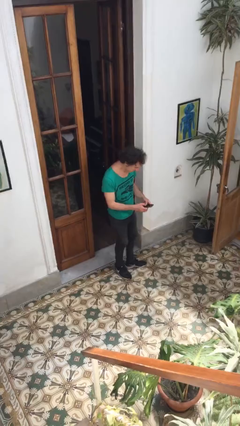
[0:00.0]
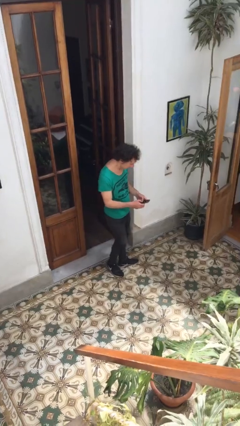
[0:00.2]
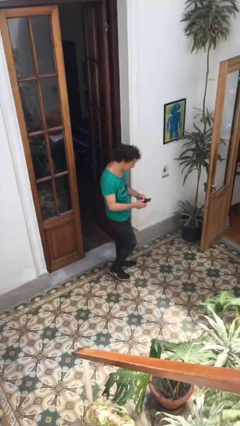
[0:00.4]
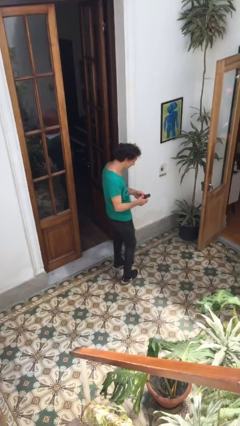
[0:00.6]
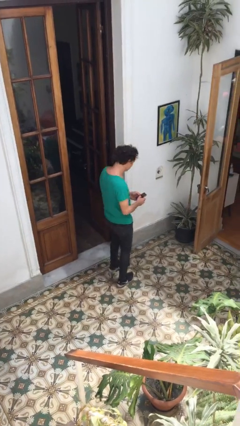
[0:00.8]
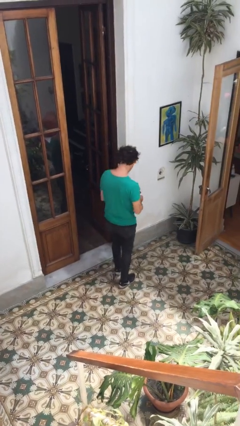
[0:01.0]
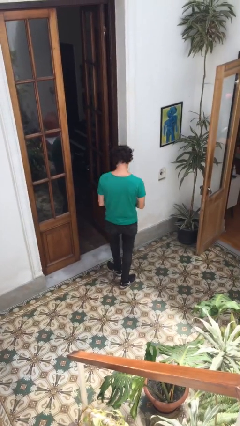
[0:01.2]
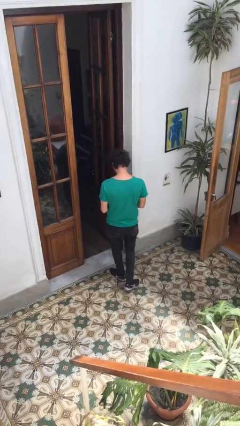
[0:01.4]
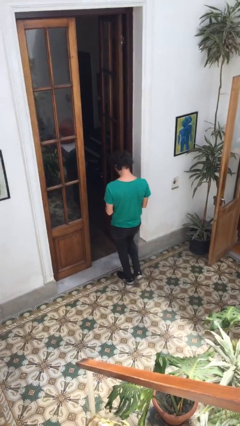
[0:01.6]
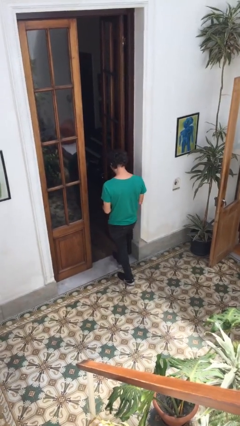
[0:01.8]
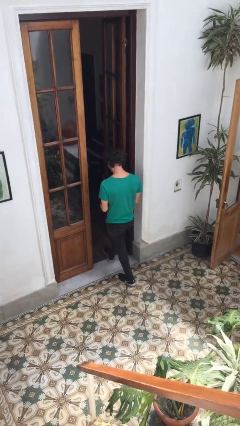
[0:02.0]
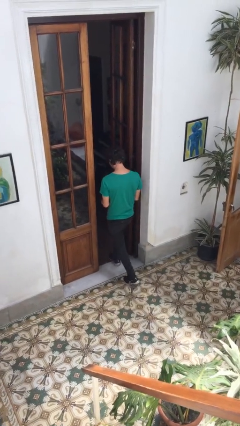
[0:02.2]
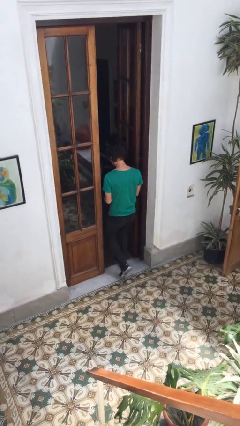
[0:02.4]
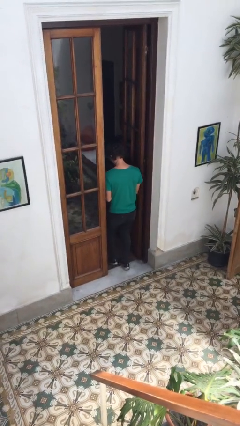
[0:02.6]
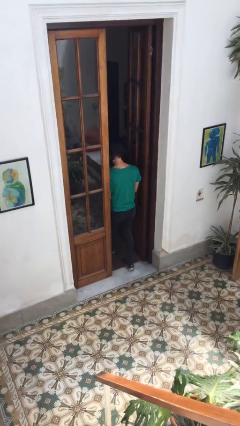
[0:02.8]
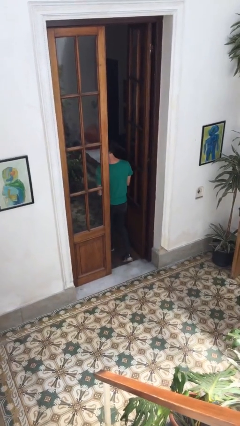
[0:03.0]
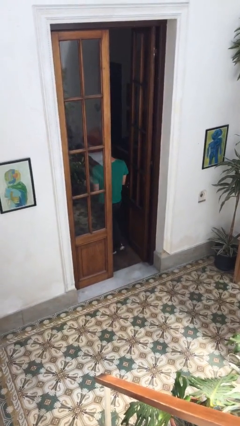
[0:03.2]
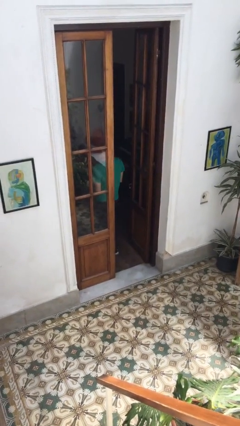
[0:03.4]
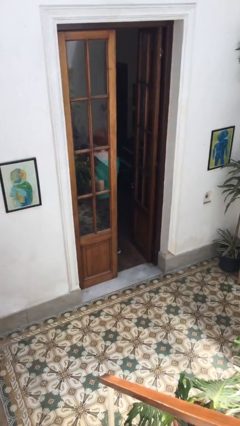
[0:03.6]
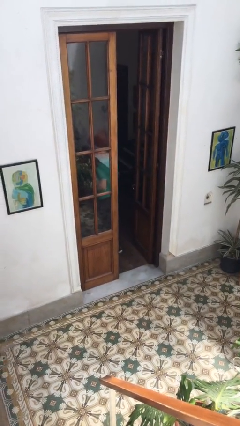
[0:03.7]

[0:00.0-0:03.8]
person exits scene through structure

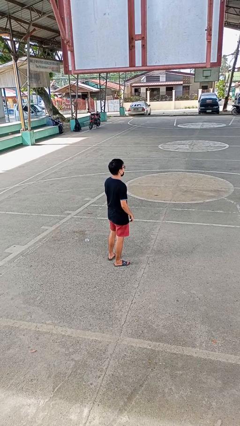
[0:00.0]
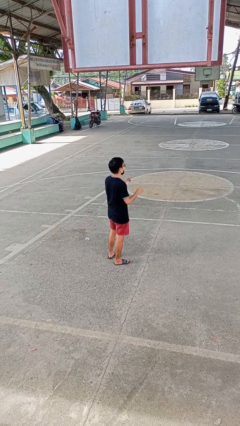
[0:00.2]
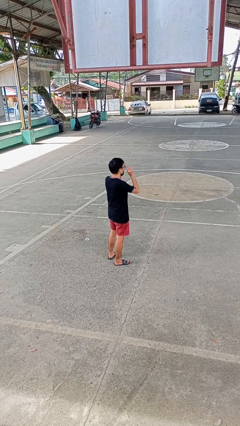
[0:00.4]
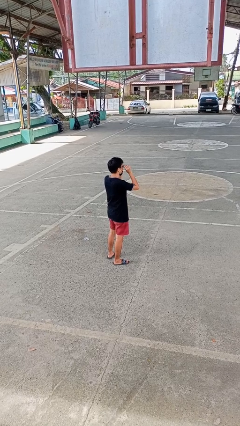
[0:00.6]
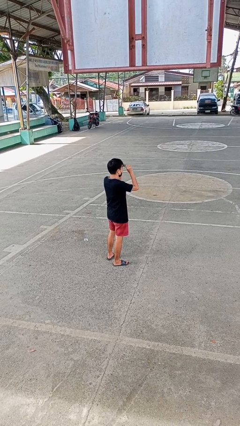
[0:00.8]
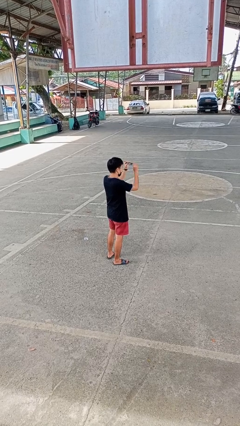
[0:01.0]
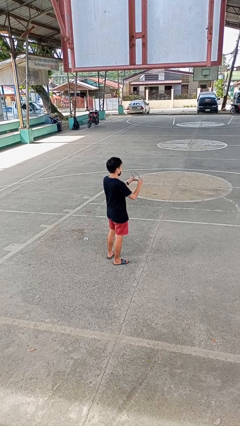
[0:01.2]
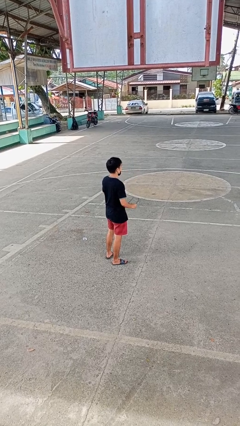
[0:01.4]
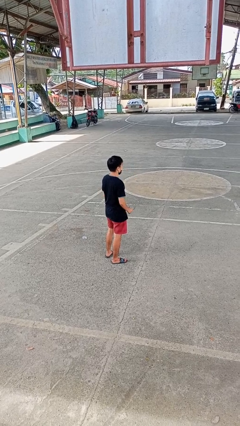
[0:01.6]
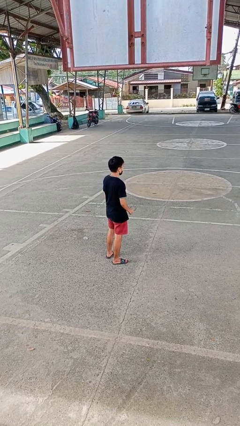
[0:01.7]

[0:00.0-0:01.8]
person takes off glasses

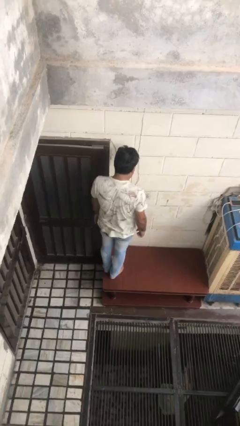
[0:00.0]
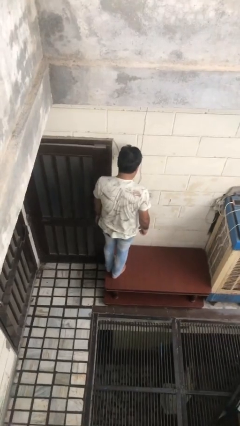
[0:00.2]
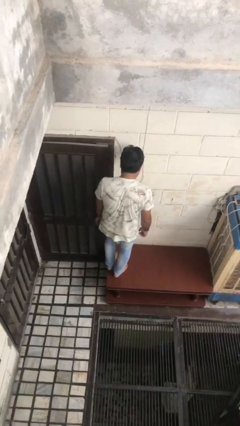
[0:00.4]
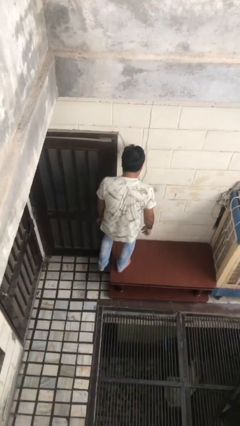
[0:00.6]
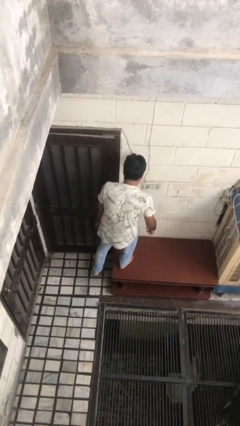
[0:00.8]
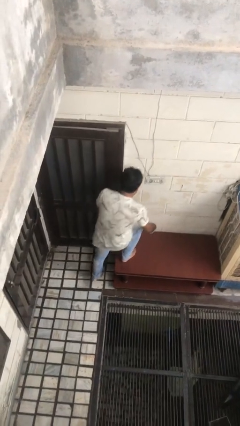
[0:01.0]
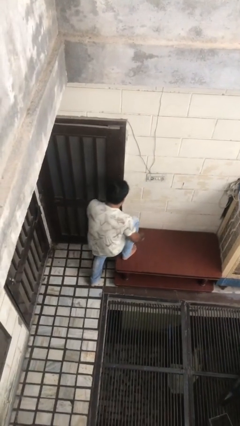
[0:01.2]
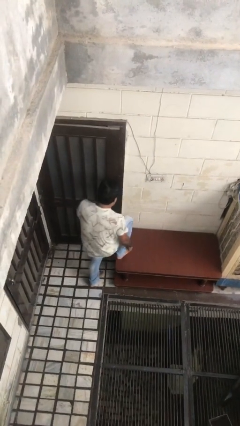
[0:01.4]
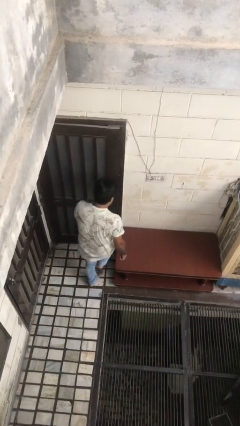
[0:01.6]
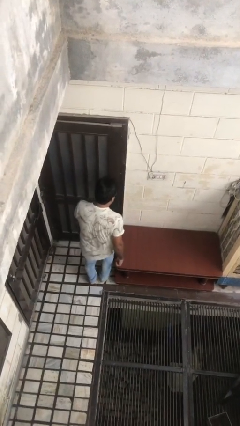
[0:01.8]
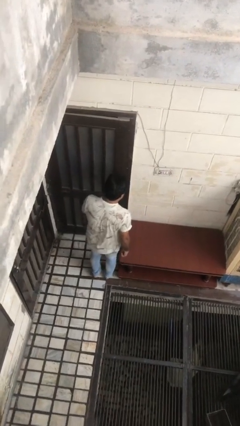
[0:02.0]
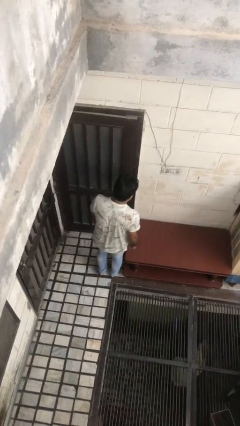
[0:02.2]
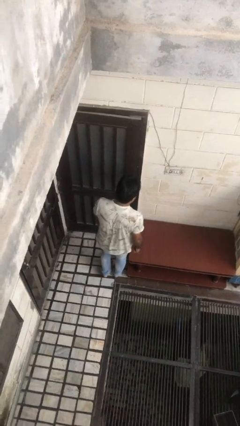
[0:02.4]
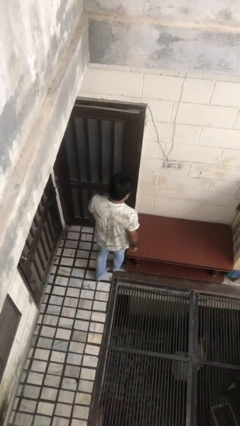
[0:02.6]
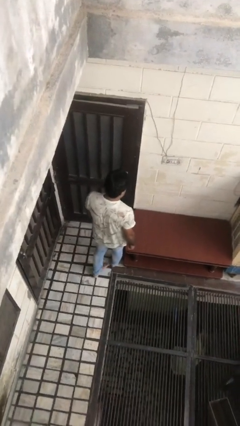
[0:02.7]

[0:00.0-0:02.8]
person climbs off table

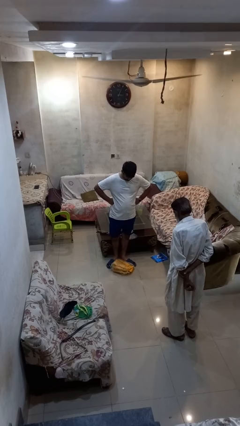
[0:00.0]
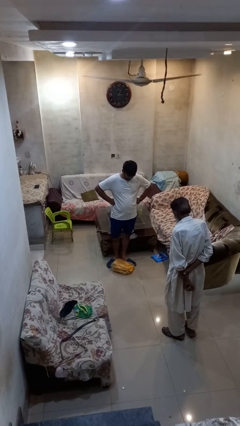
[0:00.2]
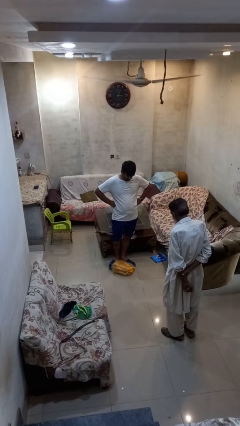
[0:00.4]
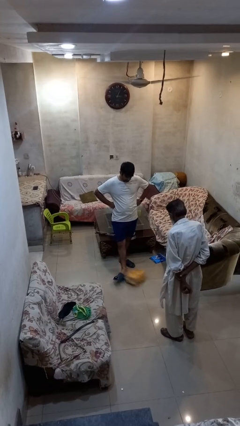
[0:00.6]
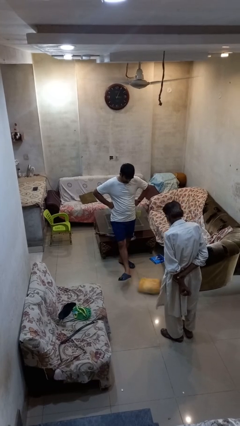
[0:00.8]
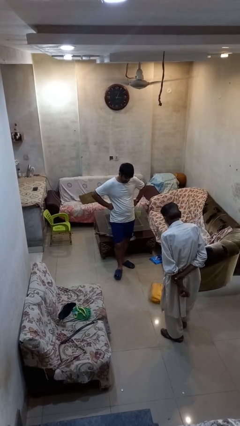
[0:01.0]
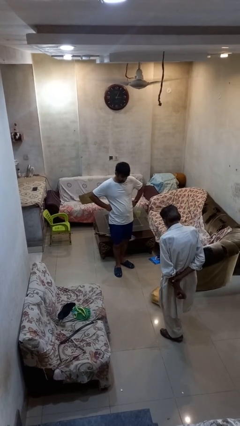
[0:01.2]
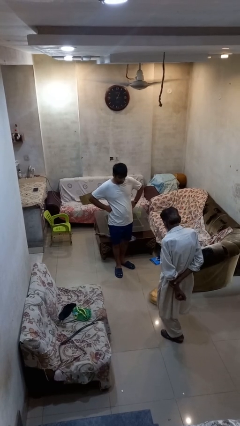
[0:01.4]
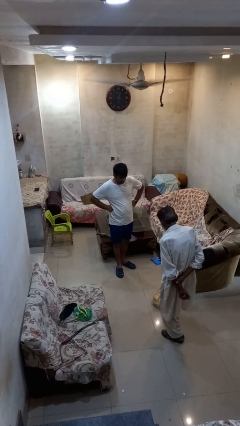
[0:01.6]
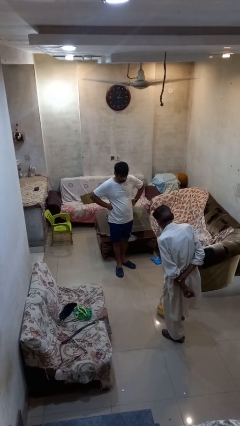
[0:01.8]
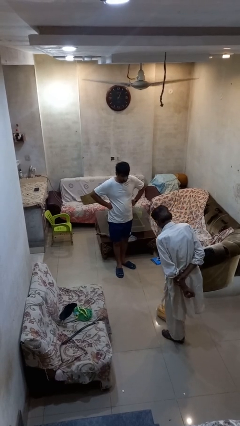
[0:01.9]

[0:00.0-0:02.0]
person kicks object to person

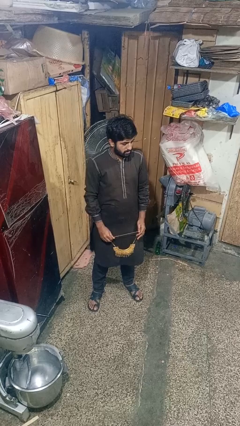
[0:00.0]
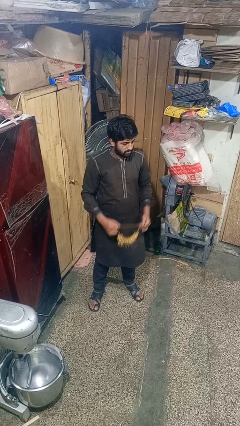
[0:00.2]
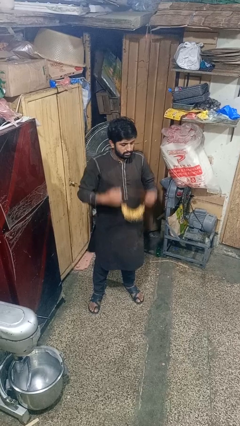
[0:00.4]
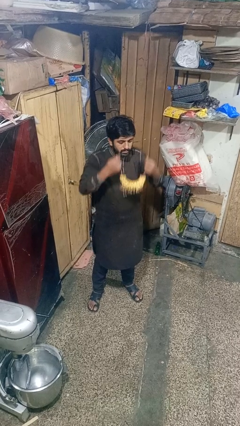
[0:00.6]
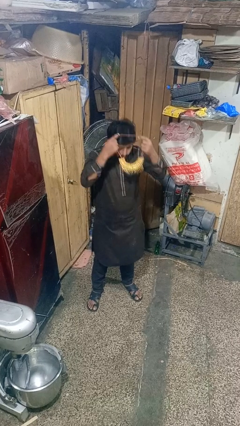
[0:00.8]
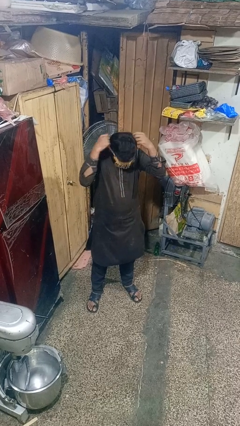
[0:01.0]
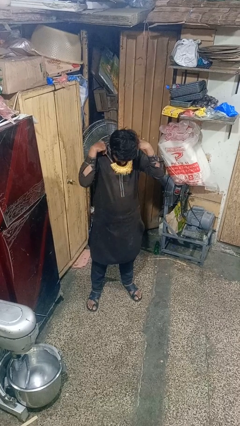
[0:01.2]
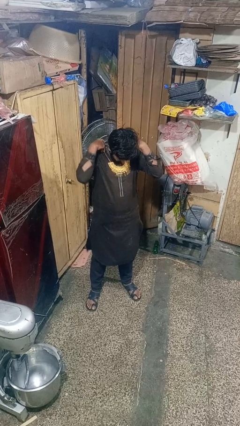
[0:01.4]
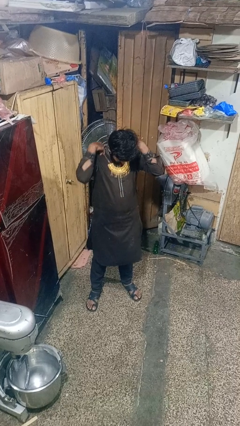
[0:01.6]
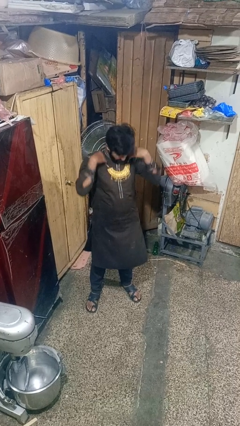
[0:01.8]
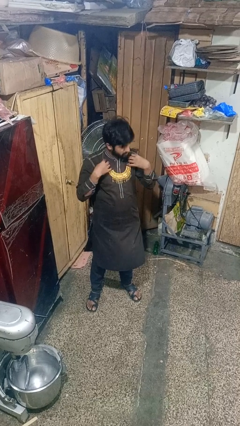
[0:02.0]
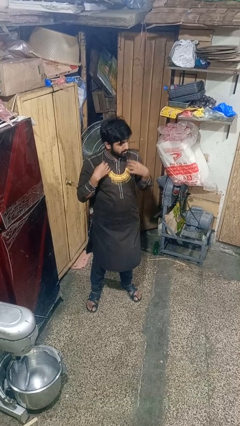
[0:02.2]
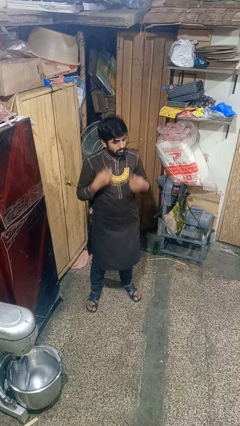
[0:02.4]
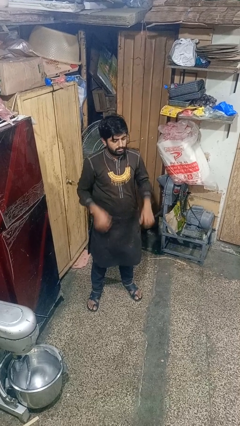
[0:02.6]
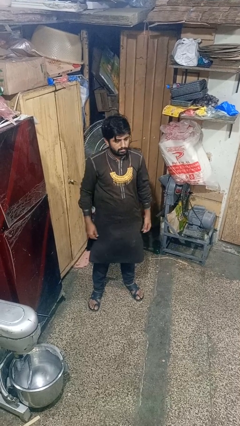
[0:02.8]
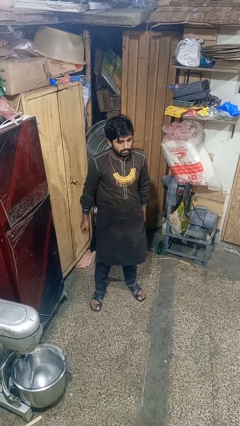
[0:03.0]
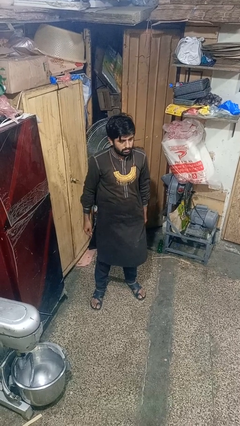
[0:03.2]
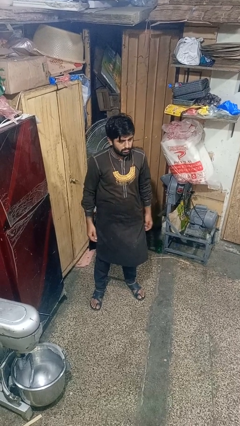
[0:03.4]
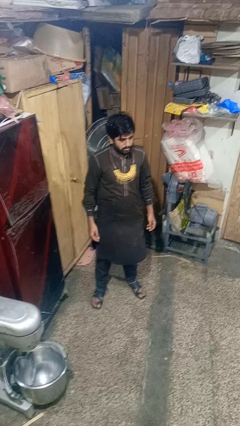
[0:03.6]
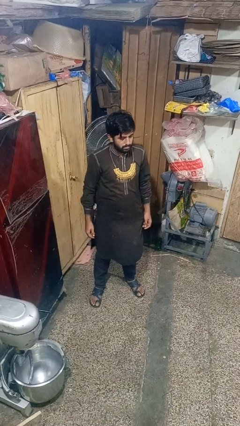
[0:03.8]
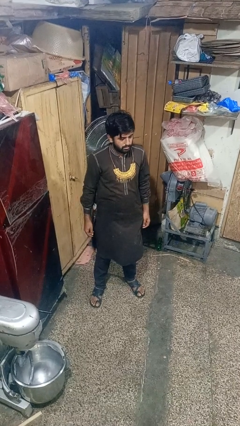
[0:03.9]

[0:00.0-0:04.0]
person puts on necklace

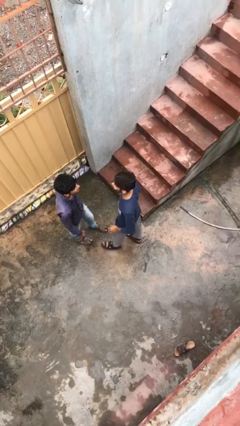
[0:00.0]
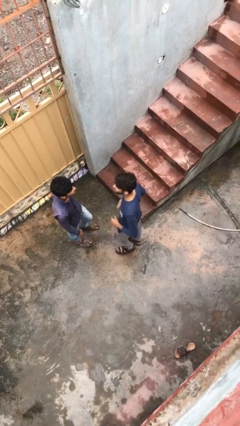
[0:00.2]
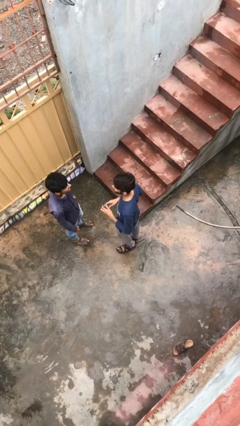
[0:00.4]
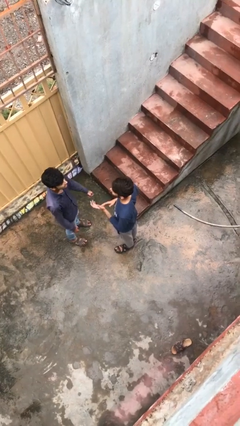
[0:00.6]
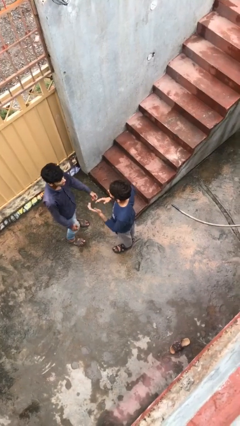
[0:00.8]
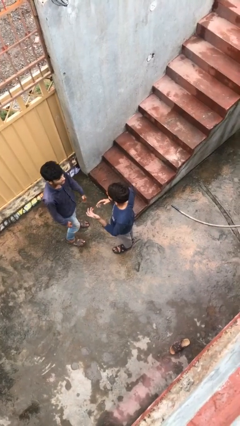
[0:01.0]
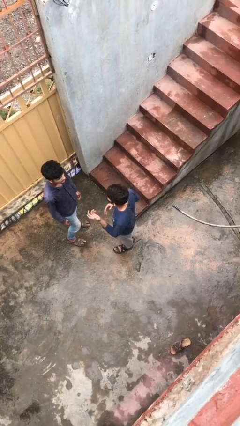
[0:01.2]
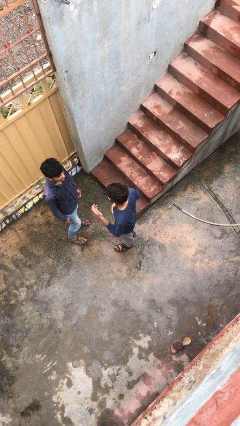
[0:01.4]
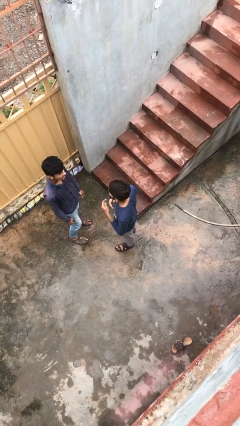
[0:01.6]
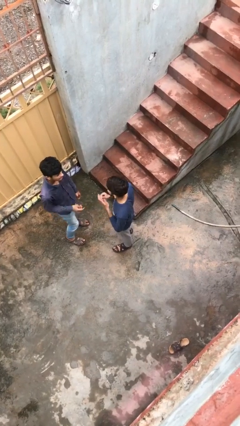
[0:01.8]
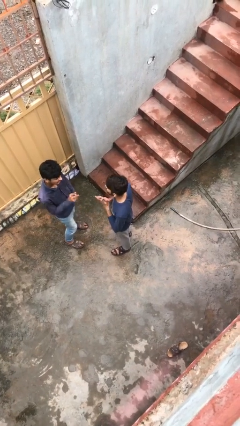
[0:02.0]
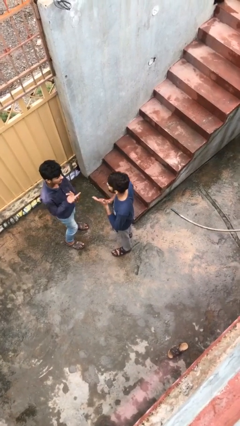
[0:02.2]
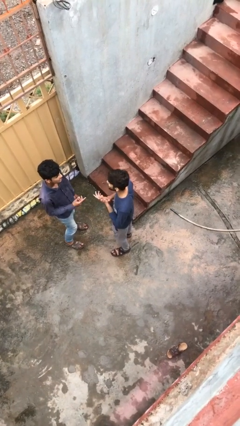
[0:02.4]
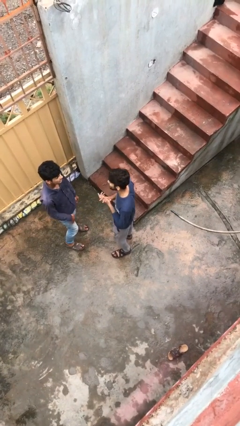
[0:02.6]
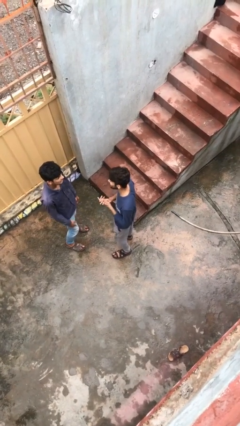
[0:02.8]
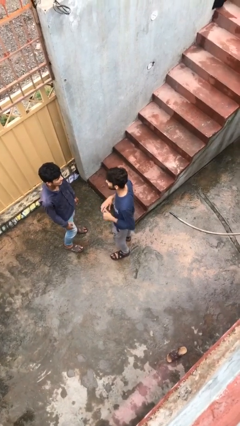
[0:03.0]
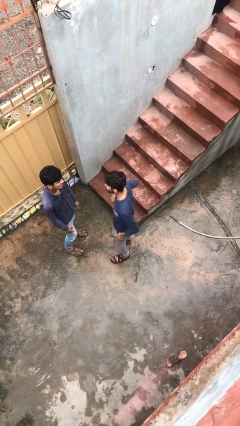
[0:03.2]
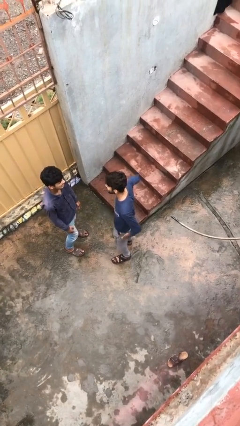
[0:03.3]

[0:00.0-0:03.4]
person talks to person
